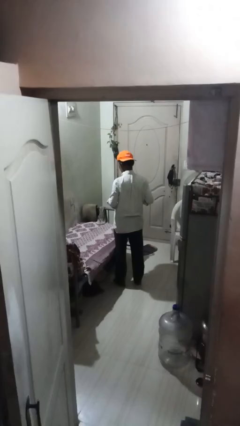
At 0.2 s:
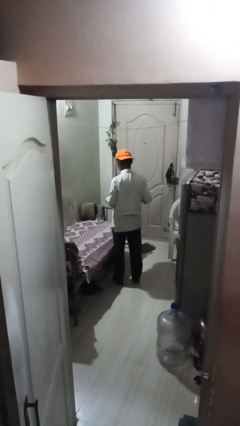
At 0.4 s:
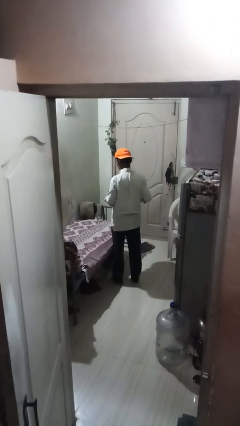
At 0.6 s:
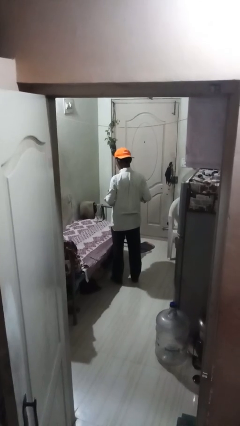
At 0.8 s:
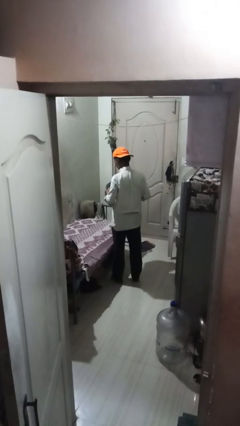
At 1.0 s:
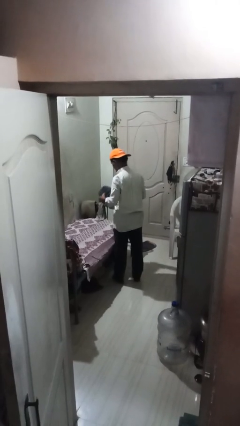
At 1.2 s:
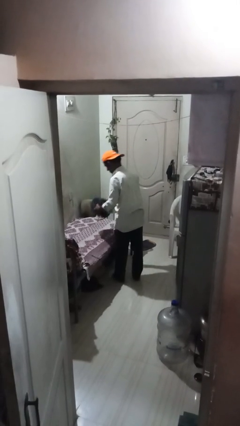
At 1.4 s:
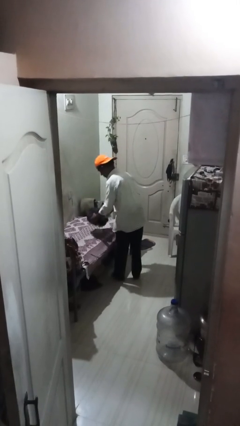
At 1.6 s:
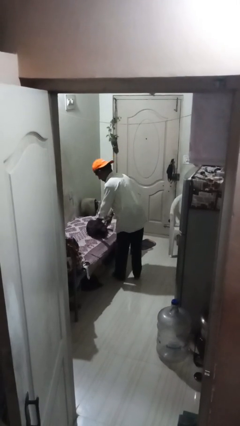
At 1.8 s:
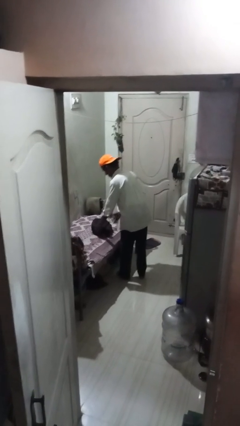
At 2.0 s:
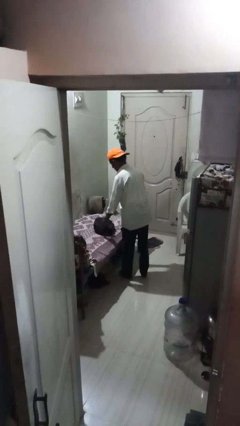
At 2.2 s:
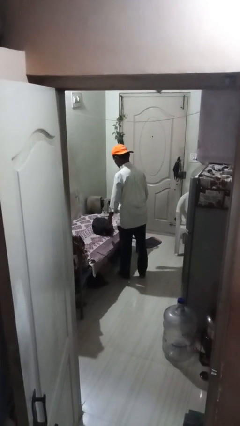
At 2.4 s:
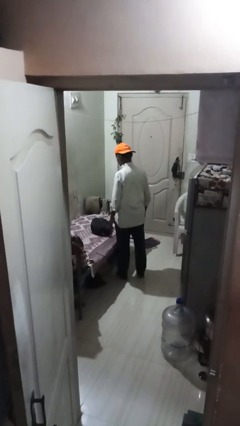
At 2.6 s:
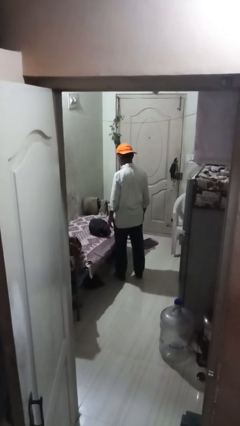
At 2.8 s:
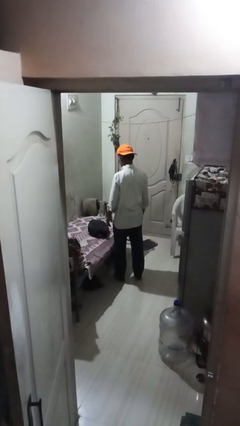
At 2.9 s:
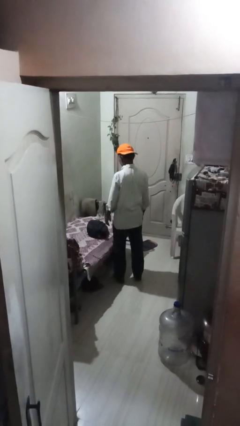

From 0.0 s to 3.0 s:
person puts down object on bed

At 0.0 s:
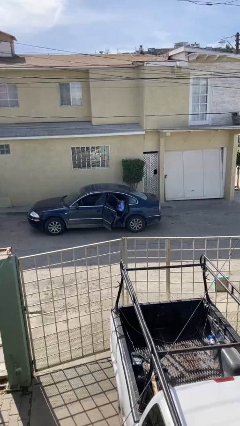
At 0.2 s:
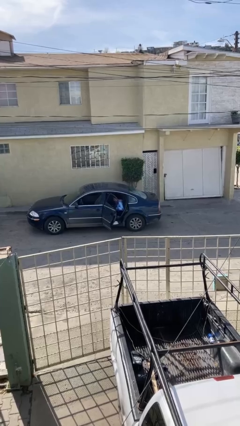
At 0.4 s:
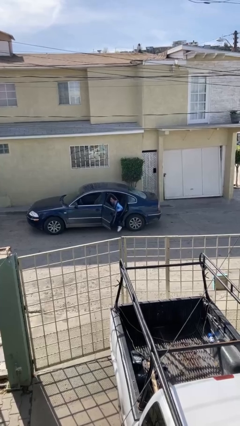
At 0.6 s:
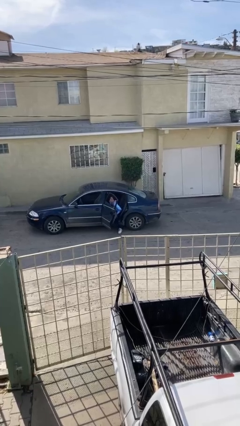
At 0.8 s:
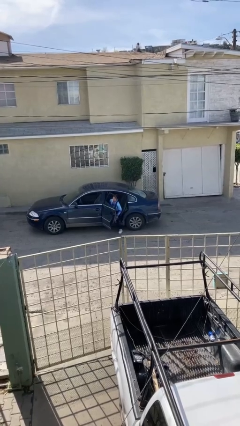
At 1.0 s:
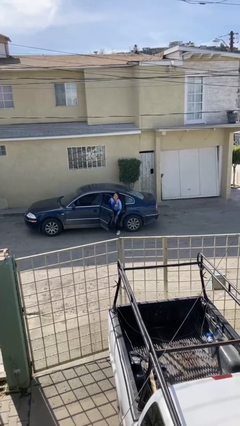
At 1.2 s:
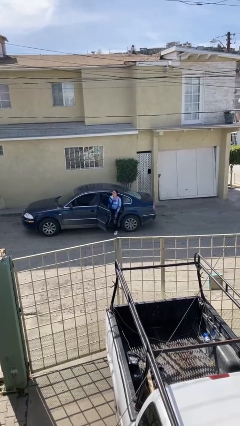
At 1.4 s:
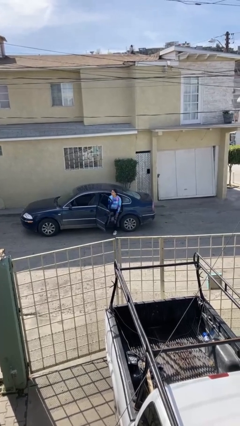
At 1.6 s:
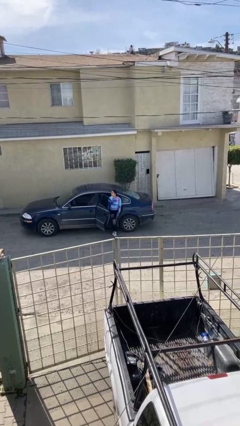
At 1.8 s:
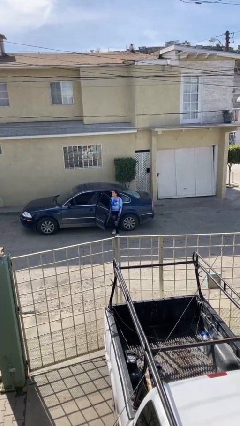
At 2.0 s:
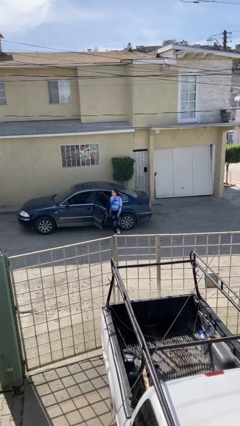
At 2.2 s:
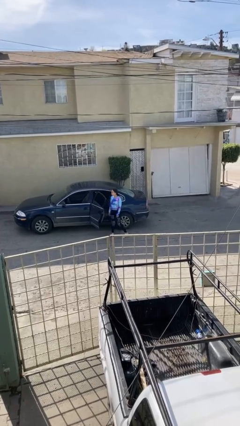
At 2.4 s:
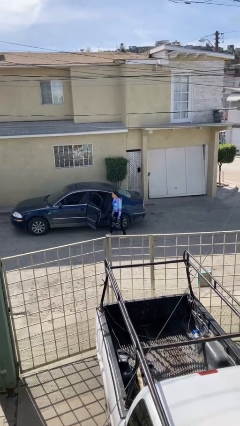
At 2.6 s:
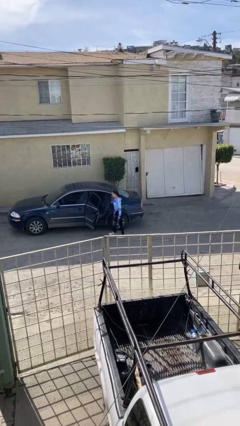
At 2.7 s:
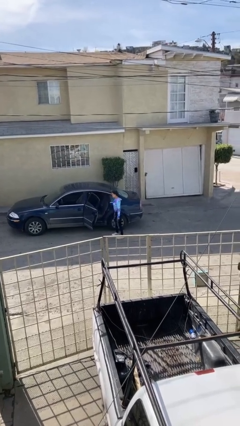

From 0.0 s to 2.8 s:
person exits car

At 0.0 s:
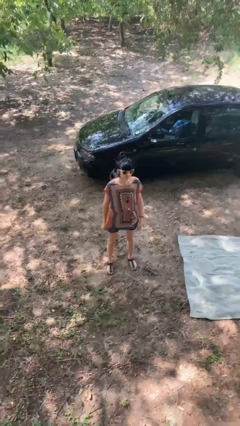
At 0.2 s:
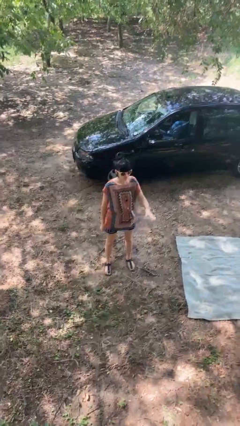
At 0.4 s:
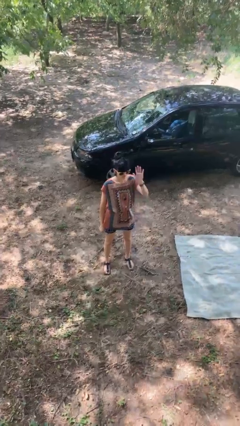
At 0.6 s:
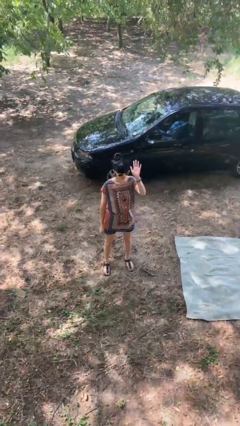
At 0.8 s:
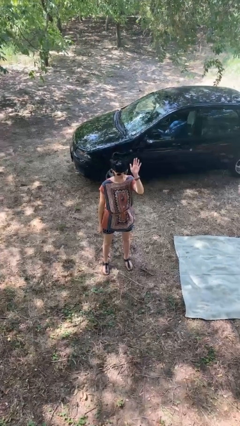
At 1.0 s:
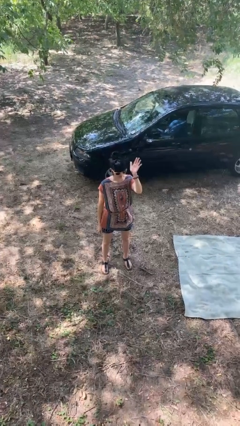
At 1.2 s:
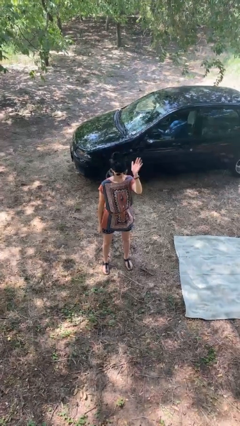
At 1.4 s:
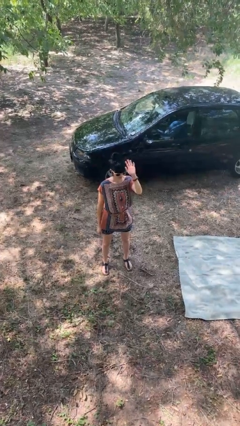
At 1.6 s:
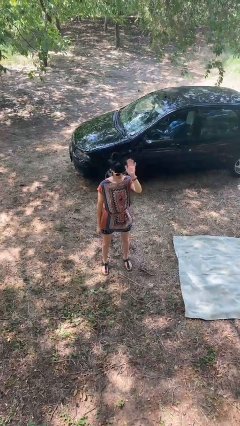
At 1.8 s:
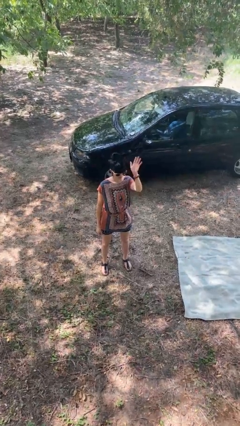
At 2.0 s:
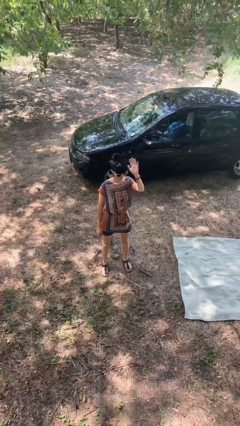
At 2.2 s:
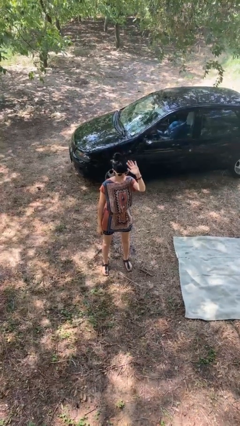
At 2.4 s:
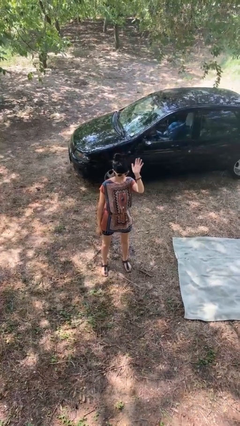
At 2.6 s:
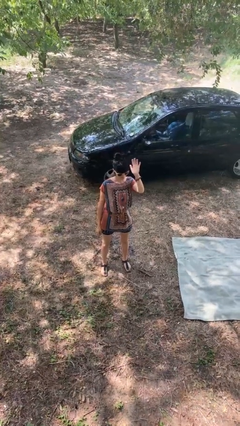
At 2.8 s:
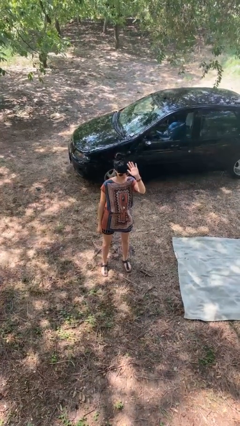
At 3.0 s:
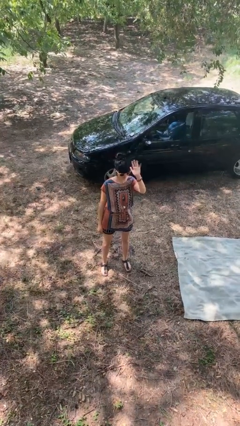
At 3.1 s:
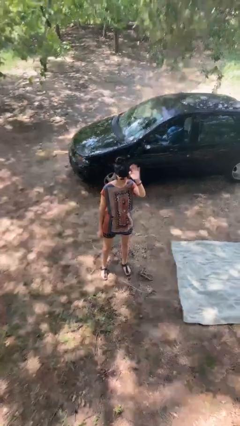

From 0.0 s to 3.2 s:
person waves at person

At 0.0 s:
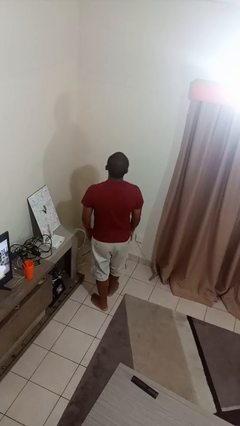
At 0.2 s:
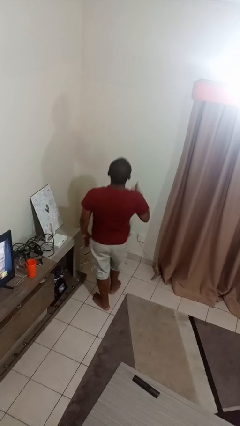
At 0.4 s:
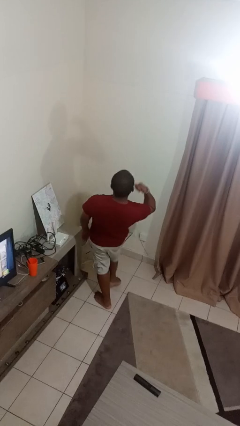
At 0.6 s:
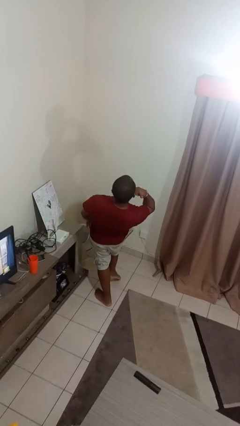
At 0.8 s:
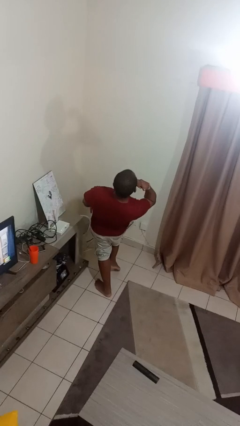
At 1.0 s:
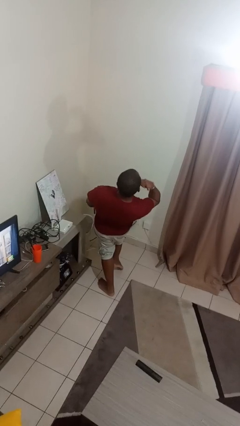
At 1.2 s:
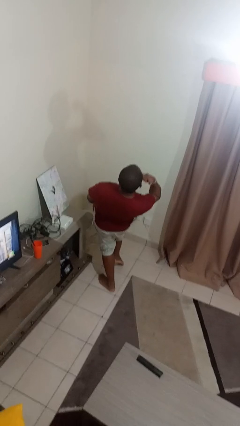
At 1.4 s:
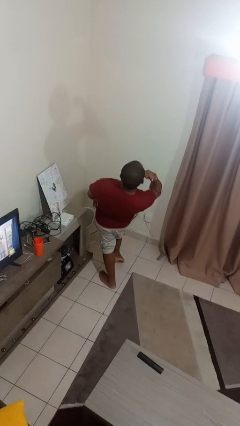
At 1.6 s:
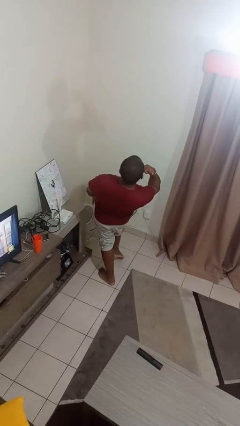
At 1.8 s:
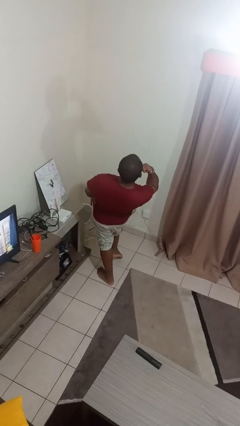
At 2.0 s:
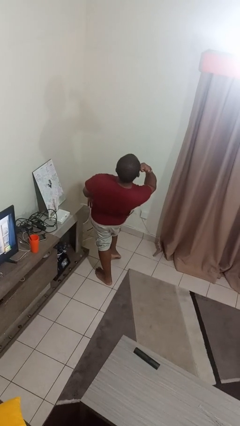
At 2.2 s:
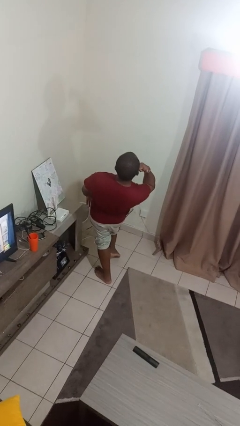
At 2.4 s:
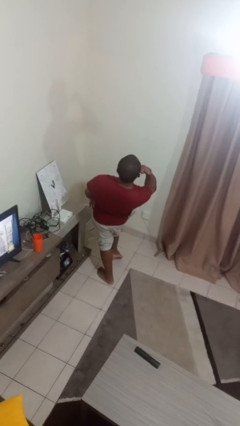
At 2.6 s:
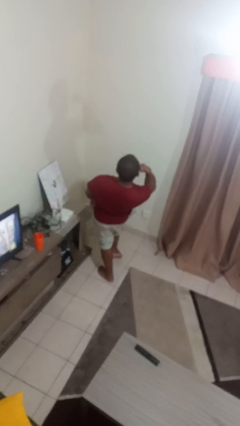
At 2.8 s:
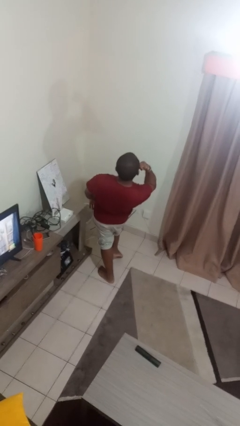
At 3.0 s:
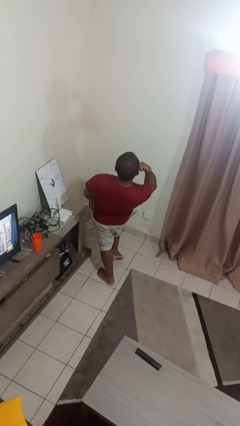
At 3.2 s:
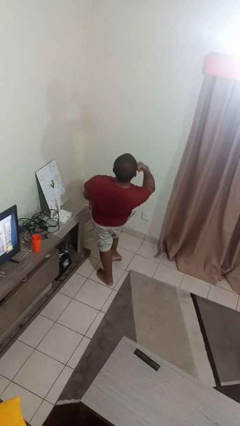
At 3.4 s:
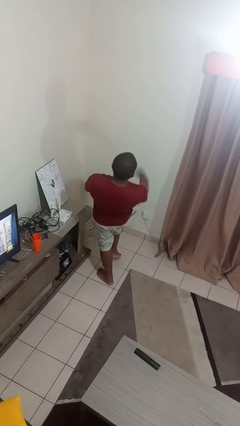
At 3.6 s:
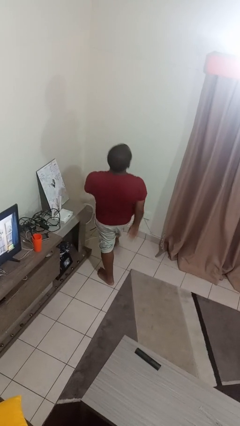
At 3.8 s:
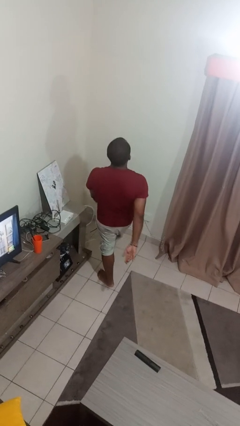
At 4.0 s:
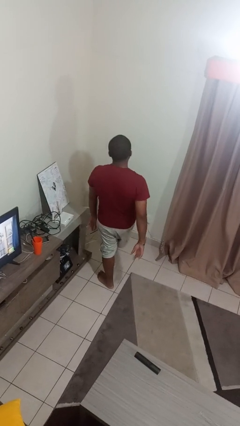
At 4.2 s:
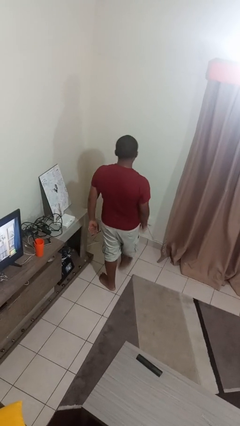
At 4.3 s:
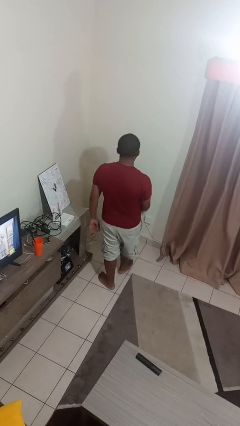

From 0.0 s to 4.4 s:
person gestures call me

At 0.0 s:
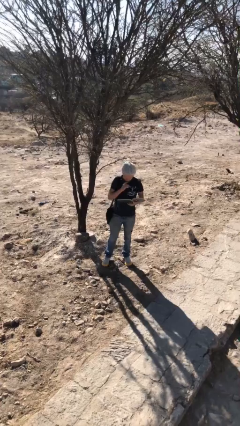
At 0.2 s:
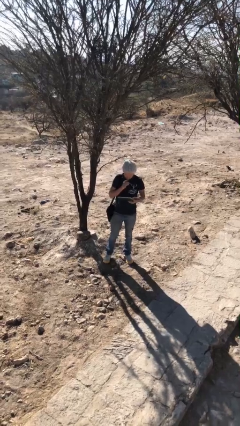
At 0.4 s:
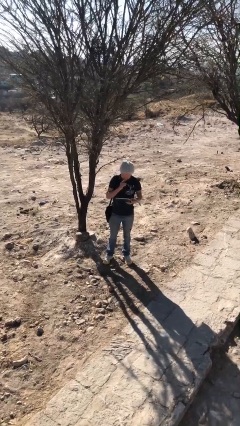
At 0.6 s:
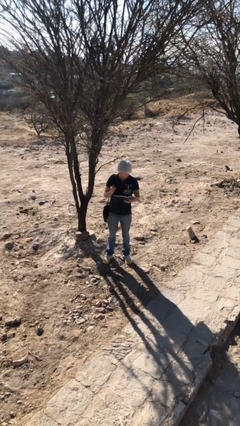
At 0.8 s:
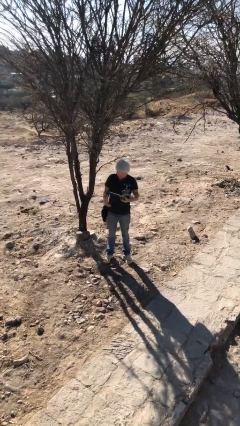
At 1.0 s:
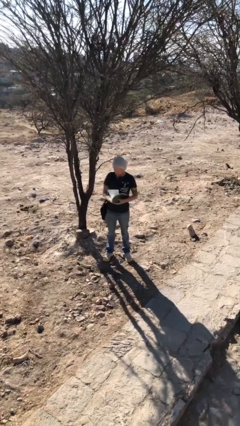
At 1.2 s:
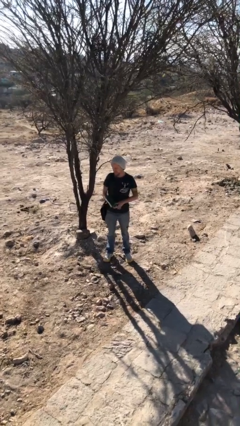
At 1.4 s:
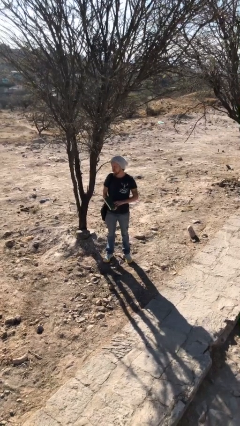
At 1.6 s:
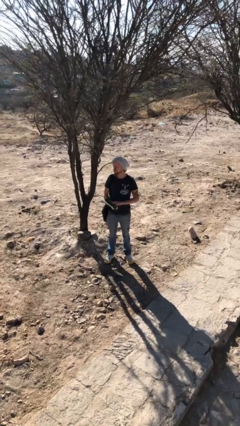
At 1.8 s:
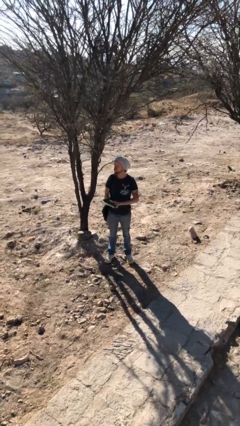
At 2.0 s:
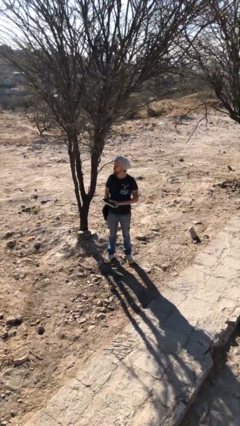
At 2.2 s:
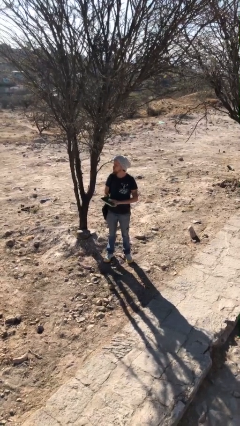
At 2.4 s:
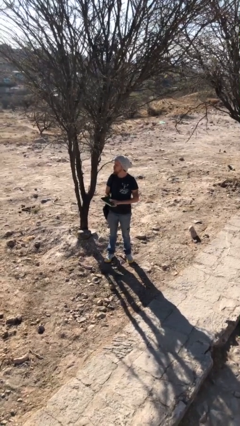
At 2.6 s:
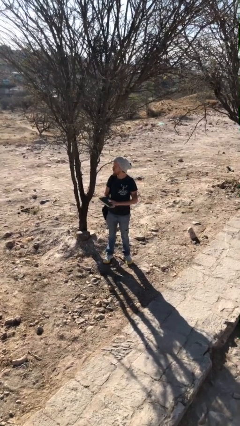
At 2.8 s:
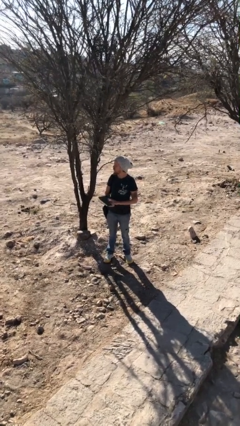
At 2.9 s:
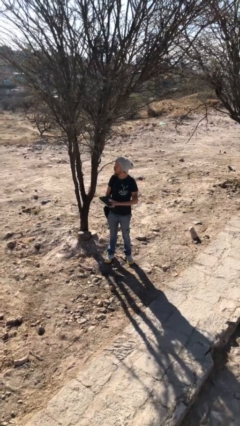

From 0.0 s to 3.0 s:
person reads document

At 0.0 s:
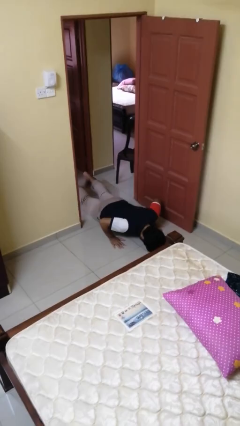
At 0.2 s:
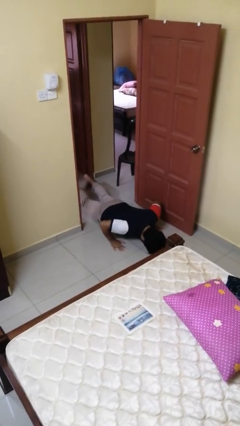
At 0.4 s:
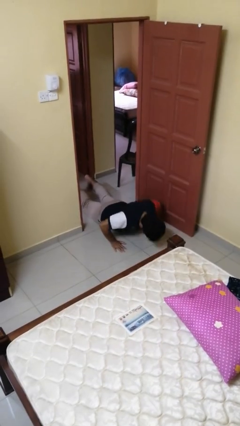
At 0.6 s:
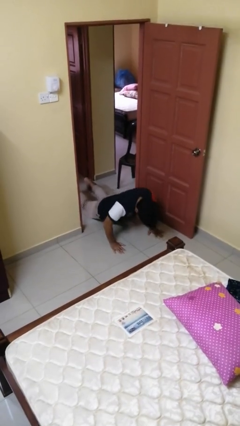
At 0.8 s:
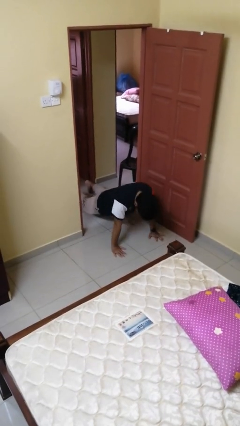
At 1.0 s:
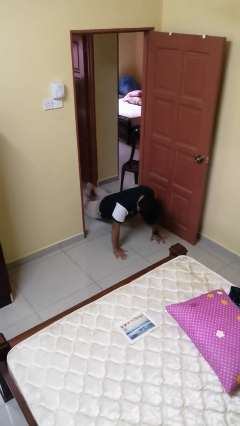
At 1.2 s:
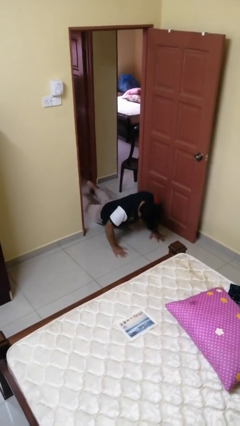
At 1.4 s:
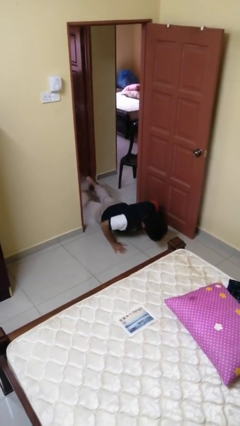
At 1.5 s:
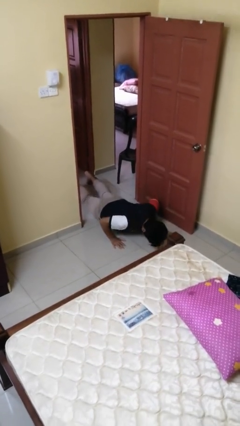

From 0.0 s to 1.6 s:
person exercises with pushup
